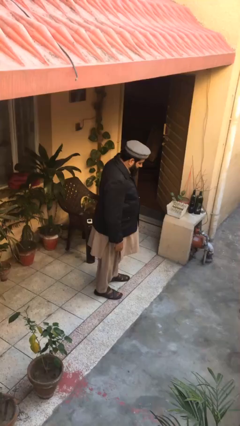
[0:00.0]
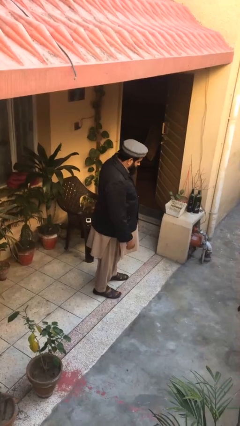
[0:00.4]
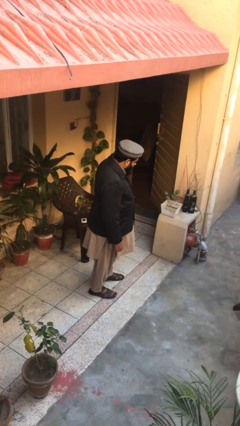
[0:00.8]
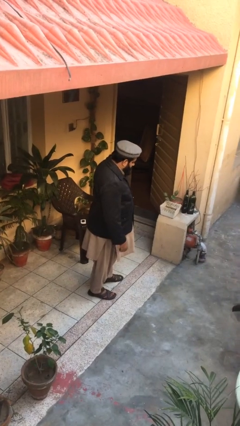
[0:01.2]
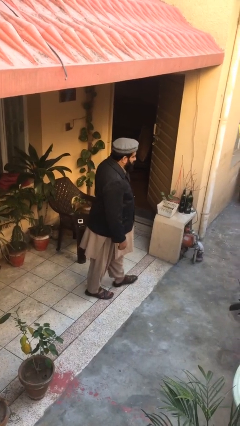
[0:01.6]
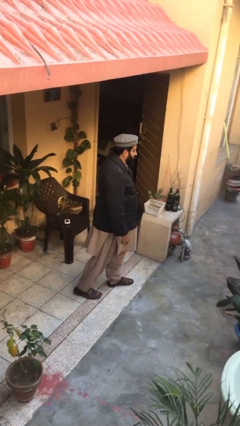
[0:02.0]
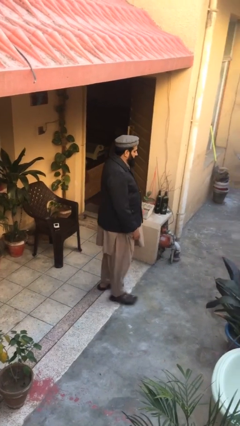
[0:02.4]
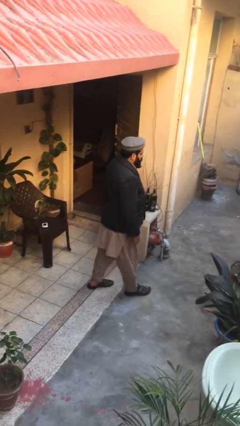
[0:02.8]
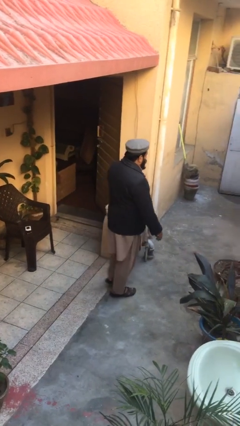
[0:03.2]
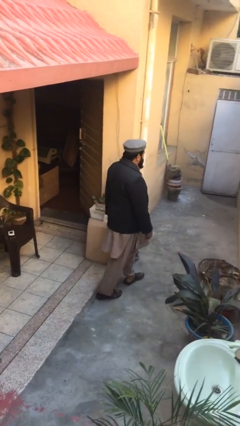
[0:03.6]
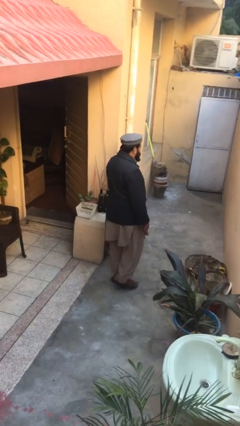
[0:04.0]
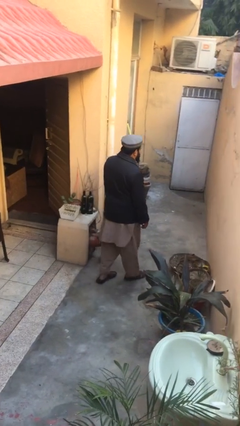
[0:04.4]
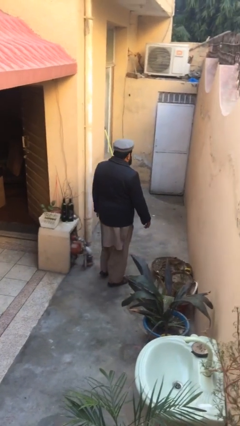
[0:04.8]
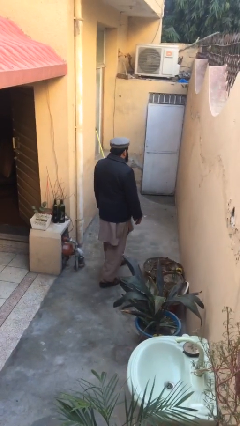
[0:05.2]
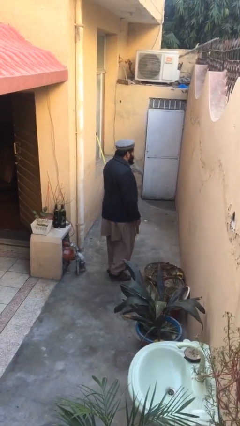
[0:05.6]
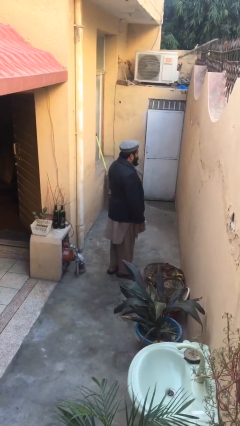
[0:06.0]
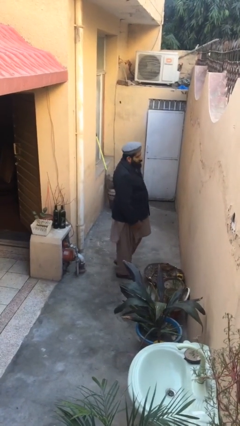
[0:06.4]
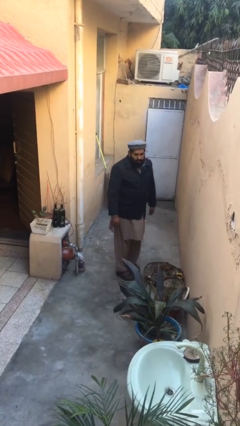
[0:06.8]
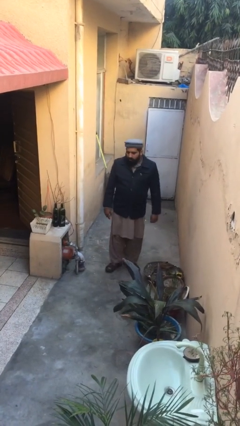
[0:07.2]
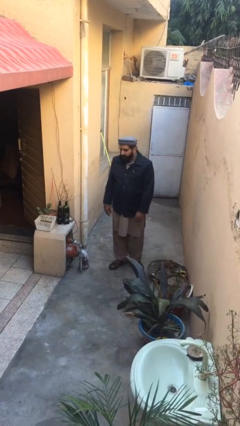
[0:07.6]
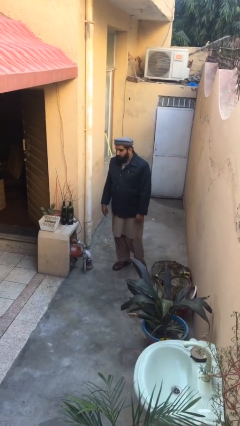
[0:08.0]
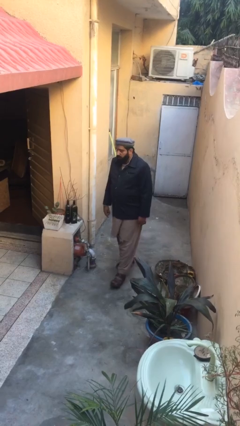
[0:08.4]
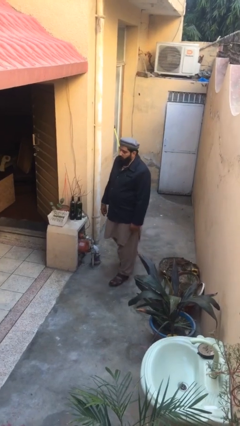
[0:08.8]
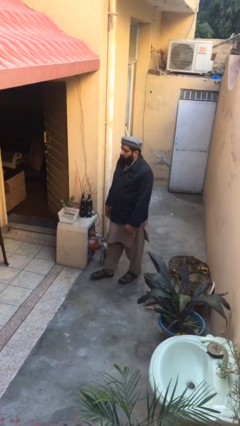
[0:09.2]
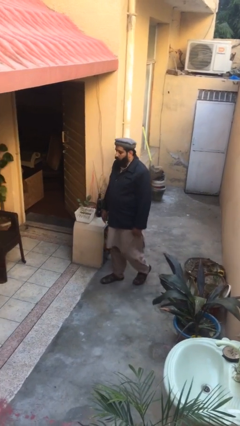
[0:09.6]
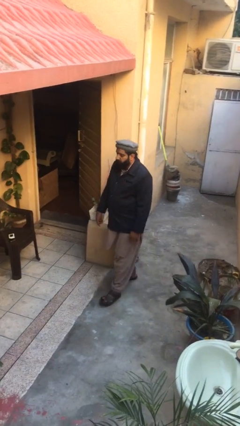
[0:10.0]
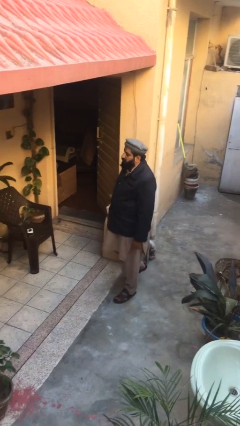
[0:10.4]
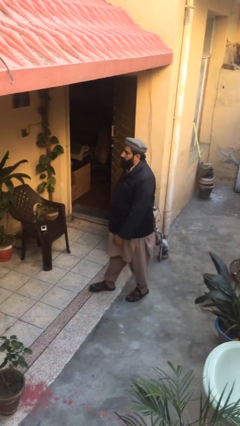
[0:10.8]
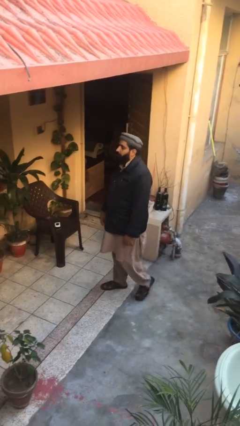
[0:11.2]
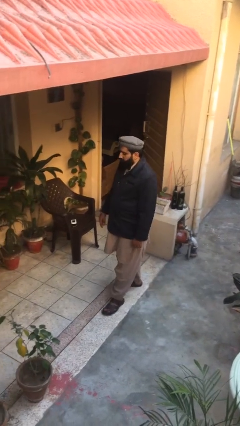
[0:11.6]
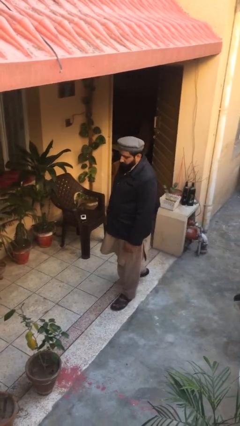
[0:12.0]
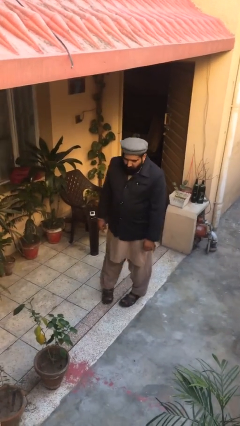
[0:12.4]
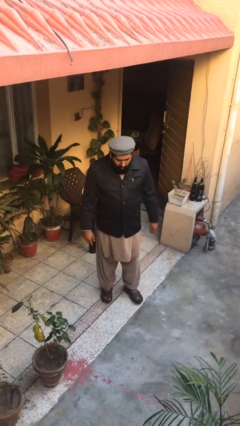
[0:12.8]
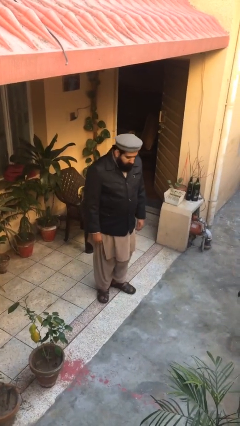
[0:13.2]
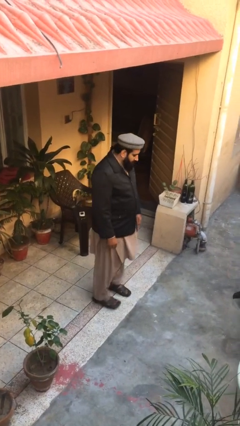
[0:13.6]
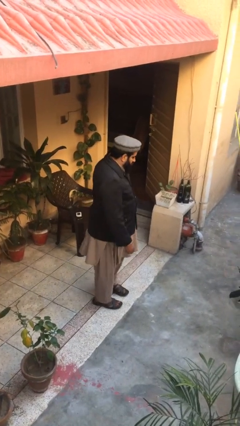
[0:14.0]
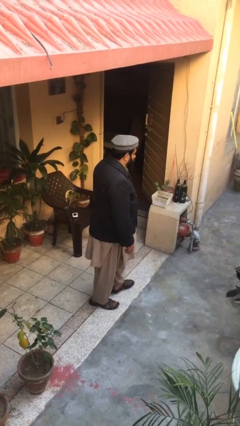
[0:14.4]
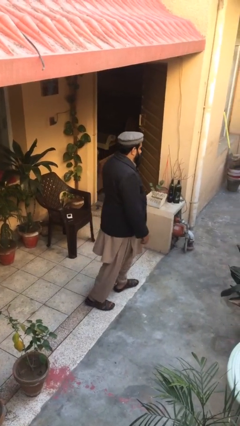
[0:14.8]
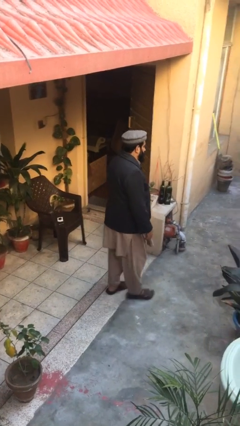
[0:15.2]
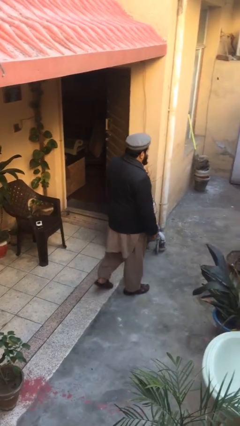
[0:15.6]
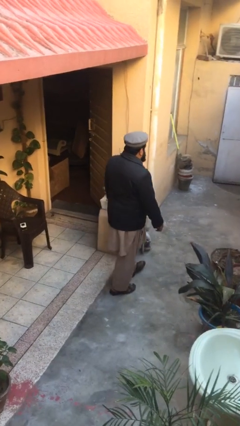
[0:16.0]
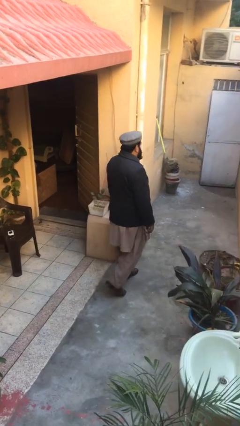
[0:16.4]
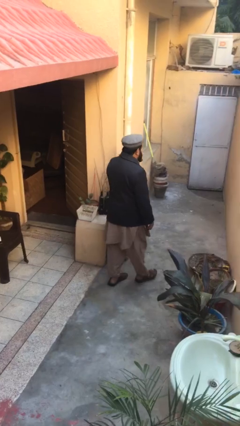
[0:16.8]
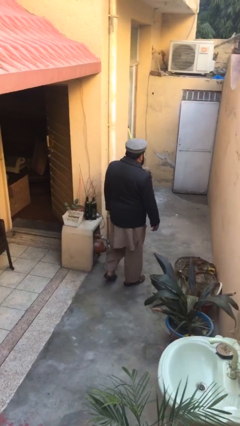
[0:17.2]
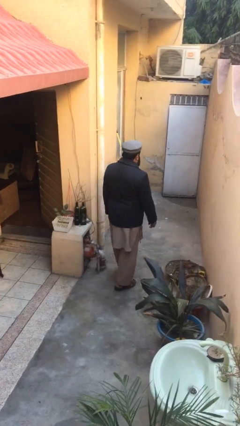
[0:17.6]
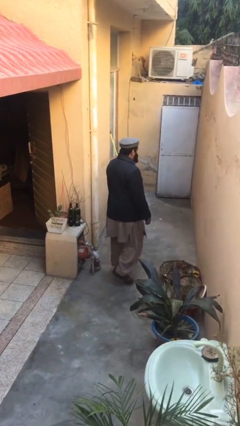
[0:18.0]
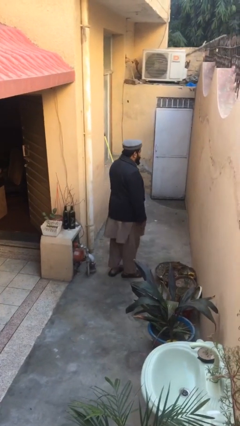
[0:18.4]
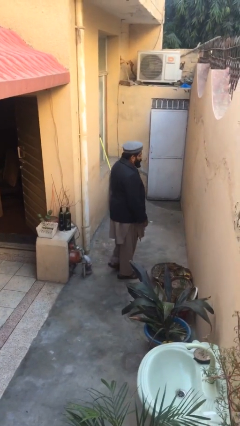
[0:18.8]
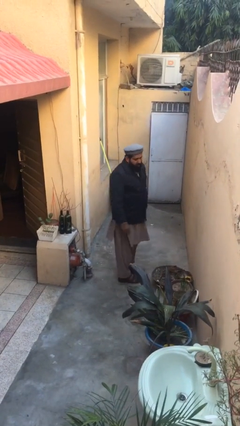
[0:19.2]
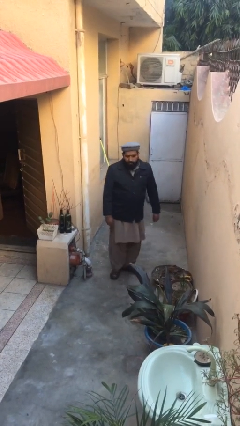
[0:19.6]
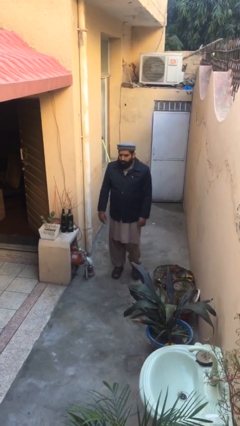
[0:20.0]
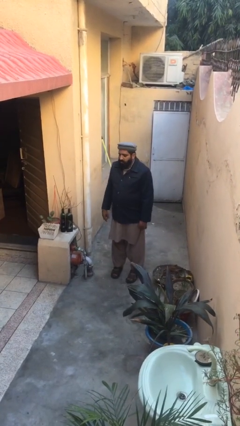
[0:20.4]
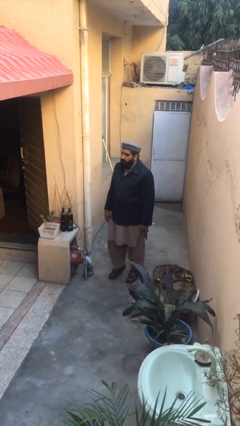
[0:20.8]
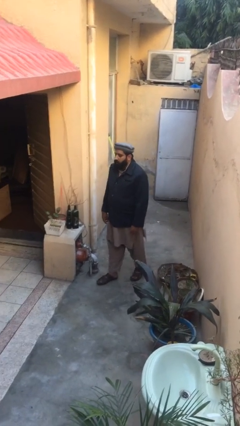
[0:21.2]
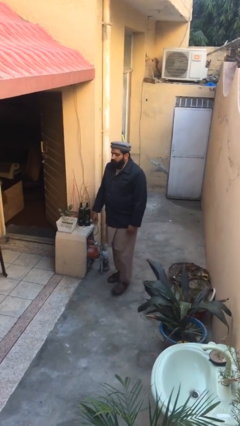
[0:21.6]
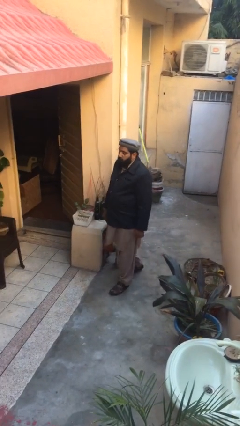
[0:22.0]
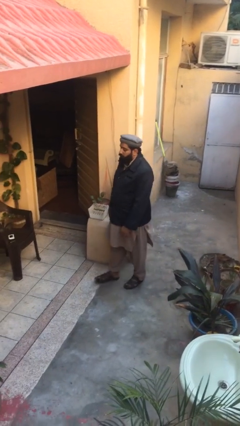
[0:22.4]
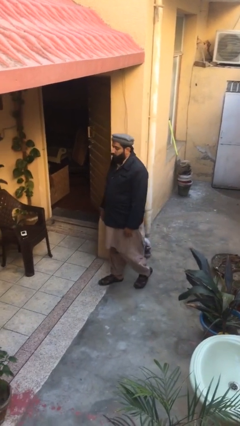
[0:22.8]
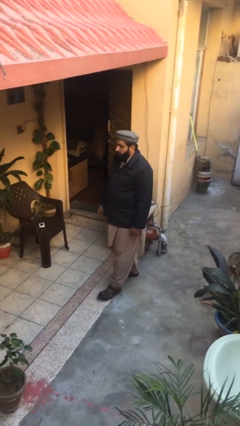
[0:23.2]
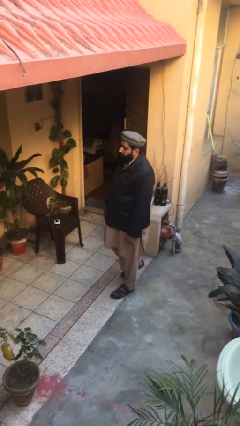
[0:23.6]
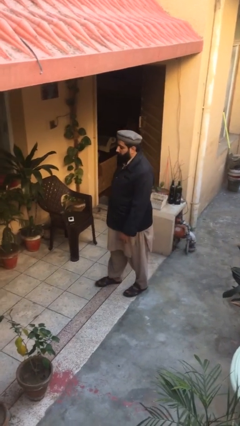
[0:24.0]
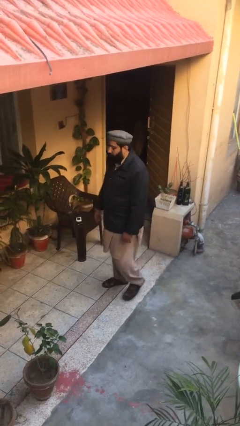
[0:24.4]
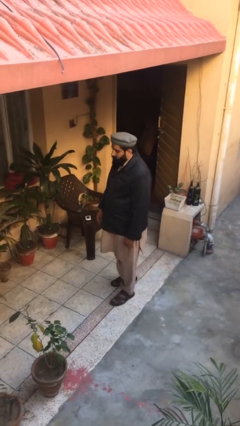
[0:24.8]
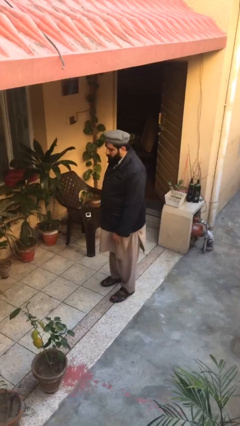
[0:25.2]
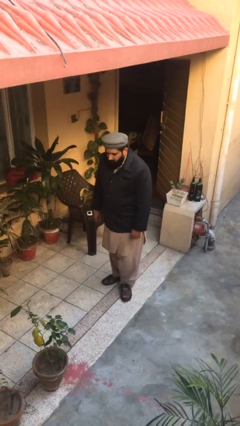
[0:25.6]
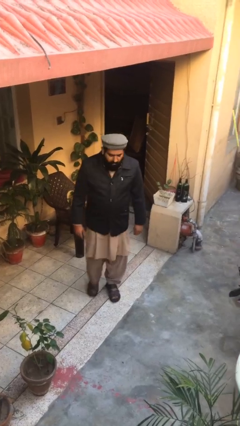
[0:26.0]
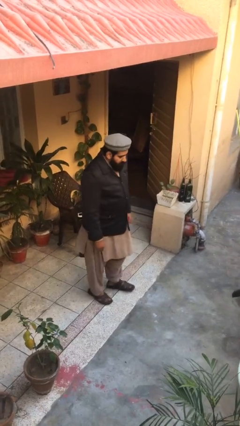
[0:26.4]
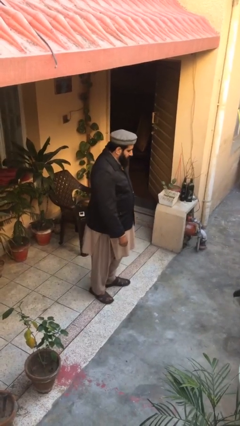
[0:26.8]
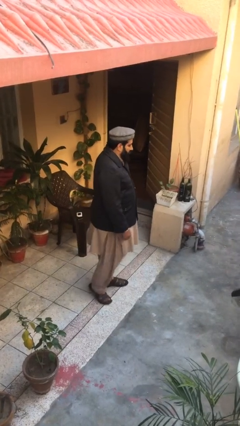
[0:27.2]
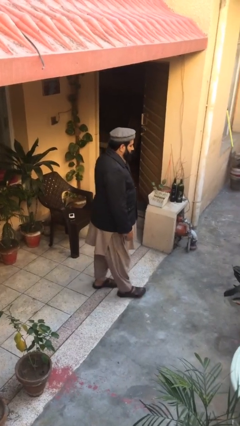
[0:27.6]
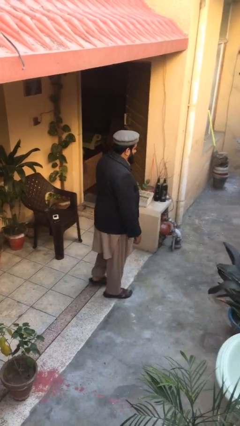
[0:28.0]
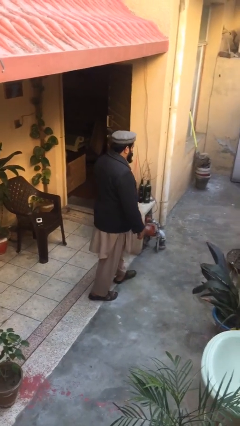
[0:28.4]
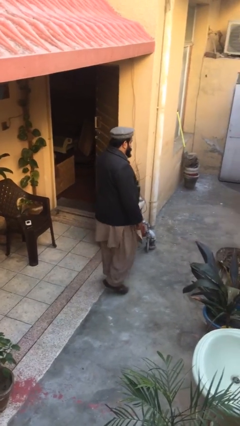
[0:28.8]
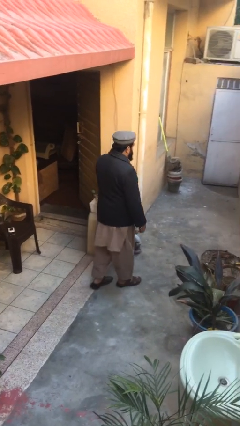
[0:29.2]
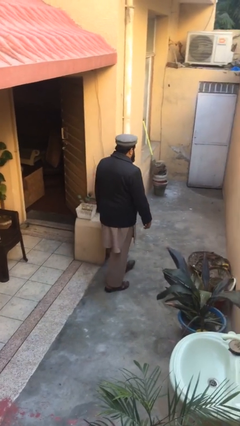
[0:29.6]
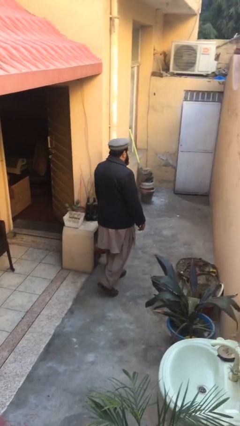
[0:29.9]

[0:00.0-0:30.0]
person walks

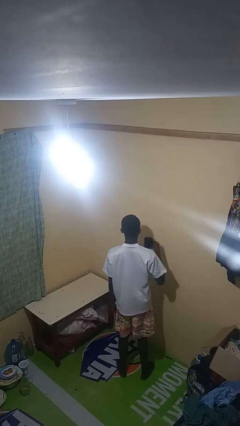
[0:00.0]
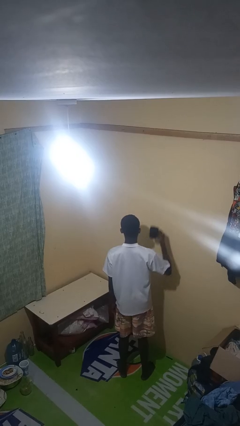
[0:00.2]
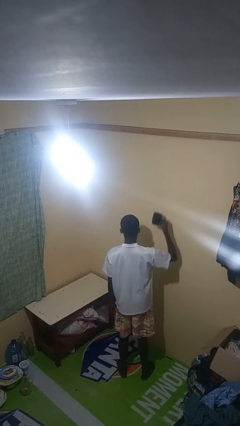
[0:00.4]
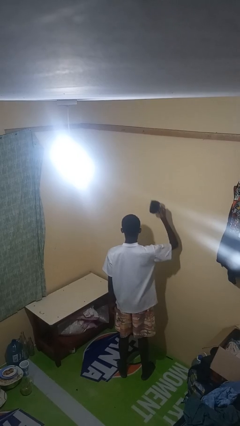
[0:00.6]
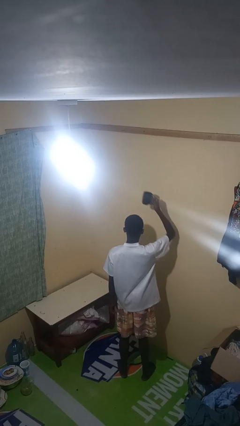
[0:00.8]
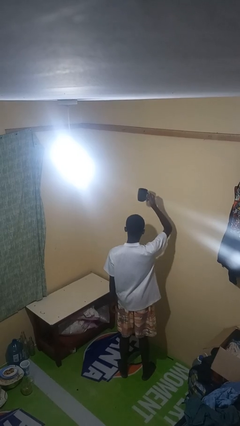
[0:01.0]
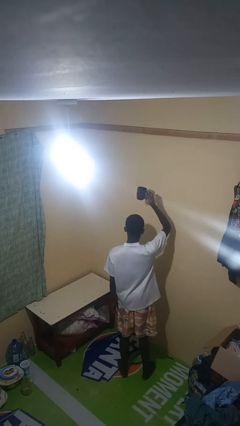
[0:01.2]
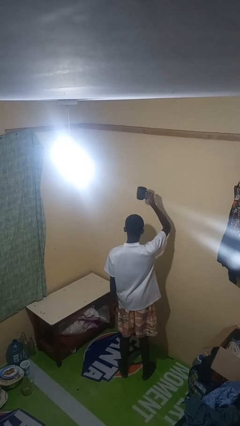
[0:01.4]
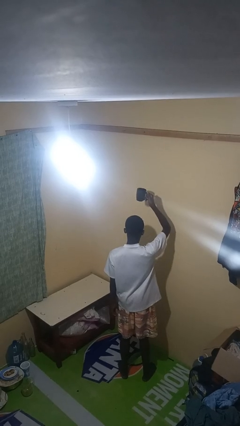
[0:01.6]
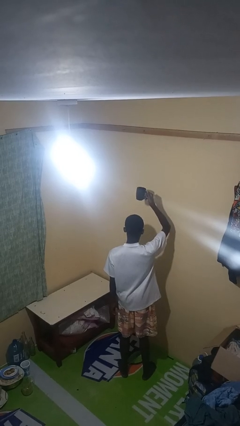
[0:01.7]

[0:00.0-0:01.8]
person holds object above head

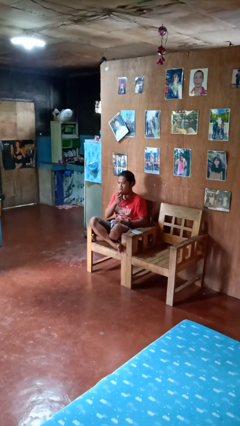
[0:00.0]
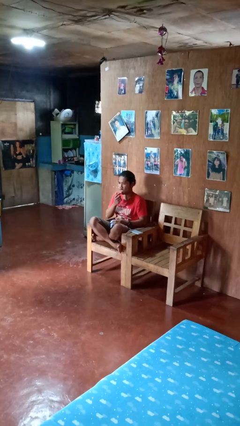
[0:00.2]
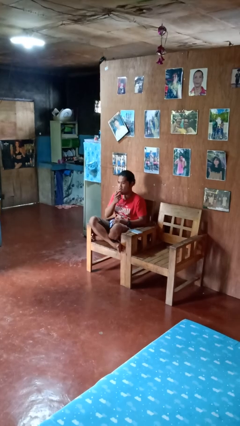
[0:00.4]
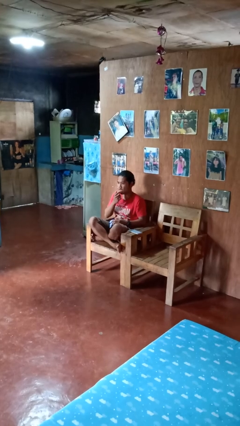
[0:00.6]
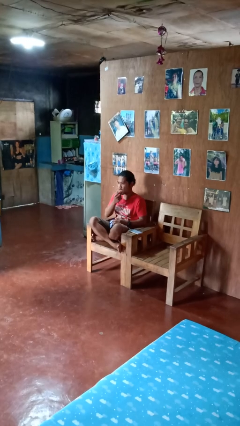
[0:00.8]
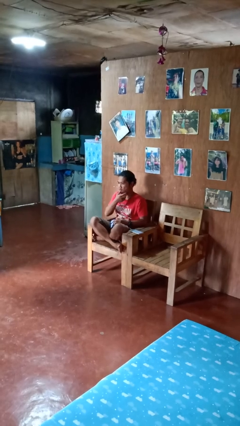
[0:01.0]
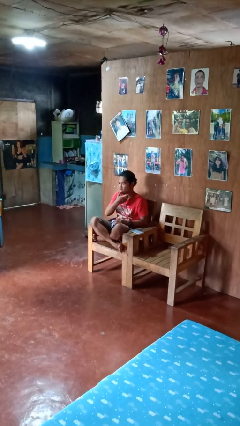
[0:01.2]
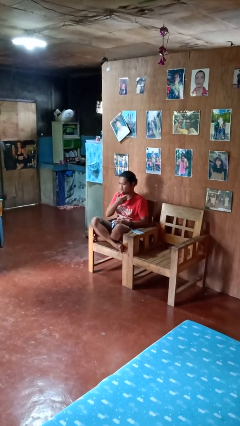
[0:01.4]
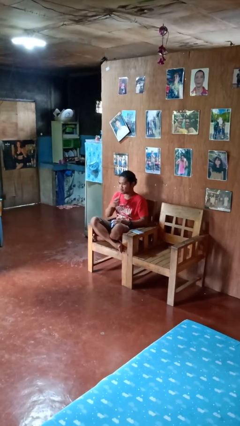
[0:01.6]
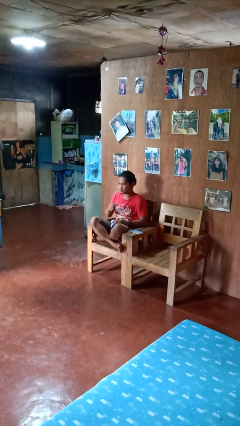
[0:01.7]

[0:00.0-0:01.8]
person licks fingers
